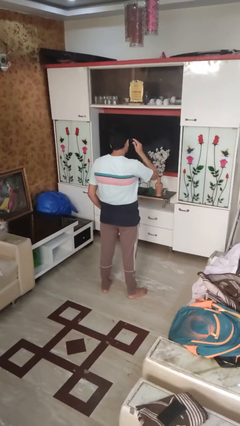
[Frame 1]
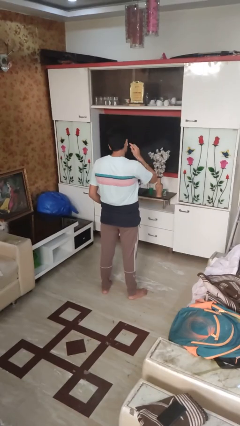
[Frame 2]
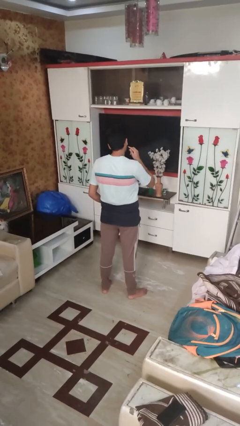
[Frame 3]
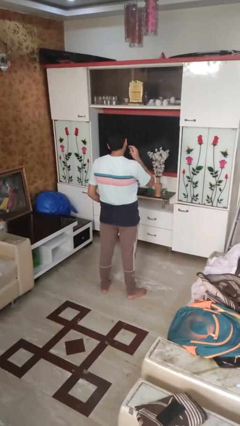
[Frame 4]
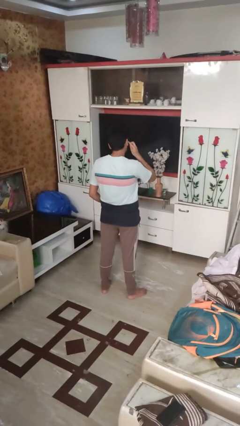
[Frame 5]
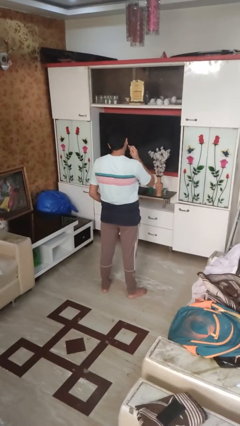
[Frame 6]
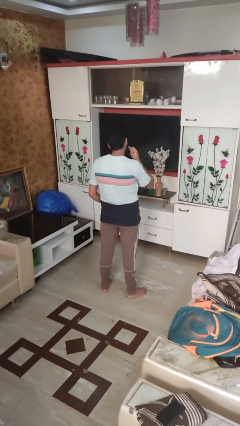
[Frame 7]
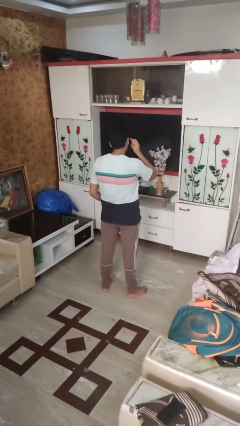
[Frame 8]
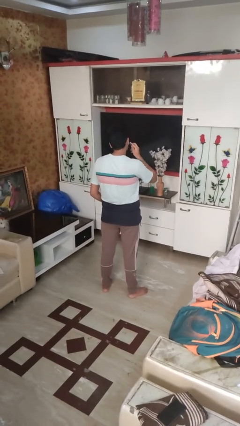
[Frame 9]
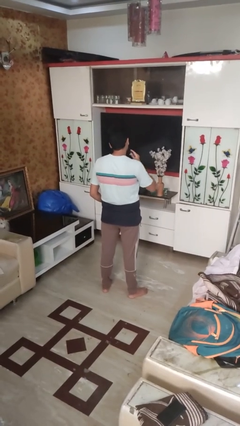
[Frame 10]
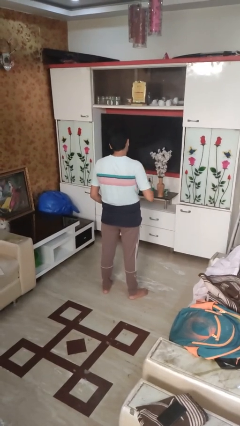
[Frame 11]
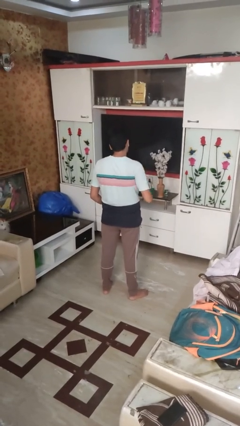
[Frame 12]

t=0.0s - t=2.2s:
person shaves face

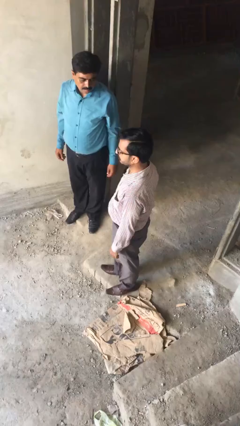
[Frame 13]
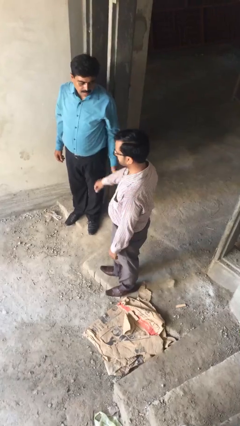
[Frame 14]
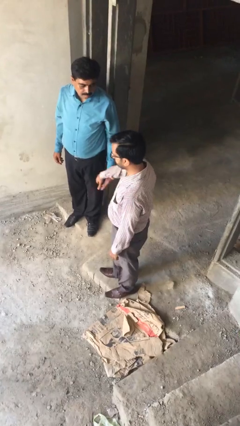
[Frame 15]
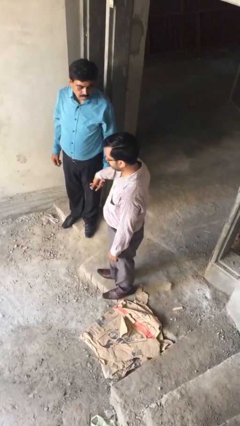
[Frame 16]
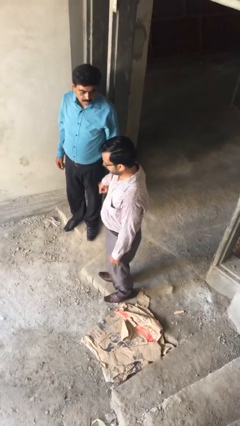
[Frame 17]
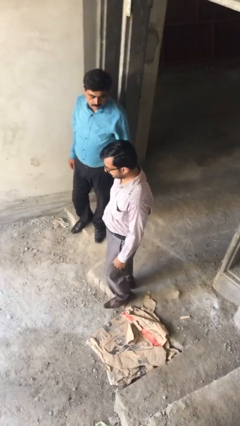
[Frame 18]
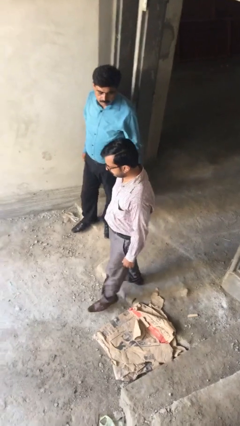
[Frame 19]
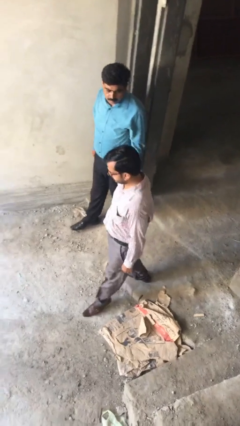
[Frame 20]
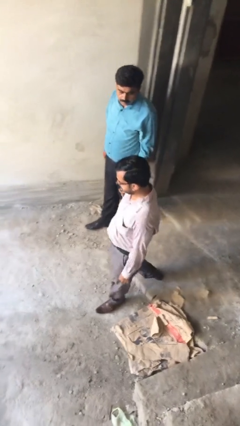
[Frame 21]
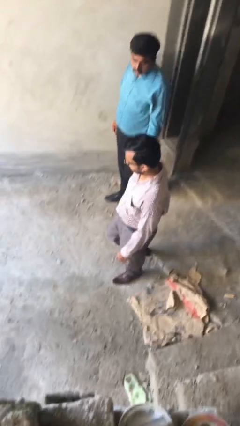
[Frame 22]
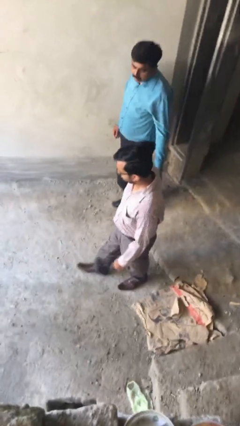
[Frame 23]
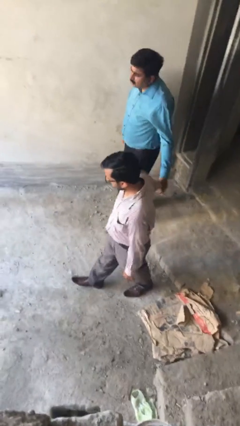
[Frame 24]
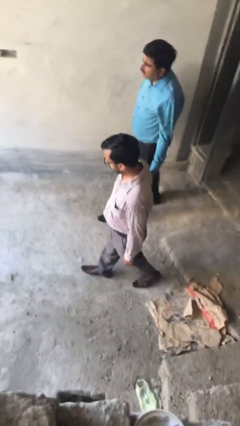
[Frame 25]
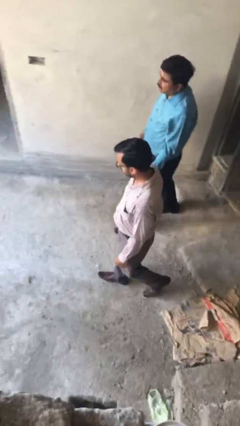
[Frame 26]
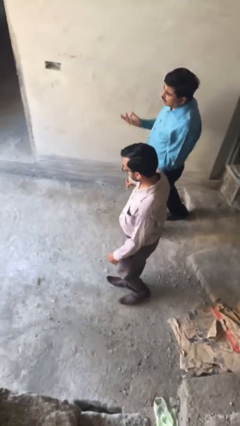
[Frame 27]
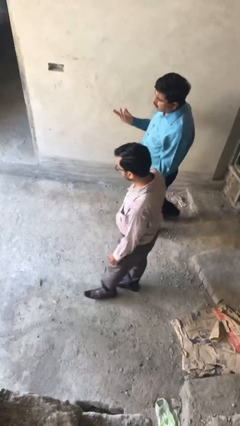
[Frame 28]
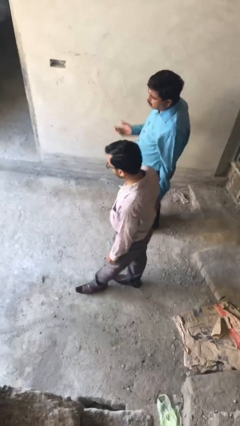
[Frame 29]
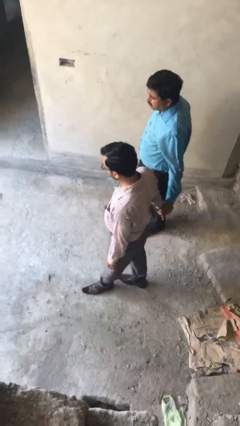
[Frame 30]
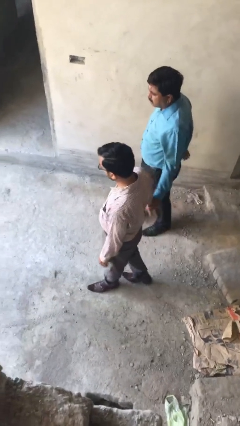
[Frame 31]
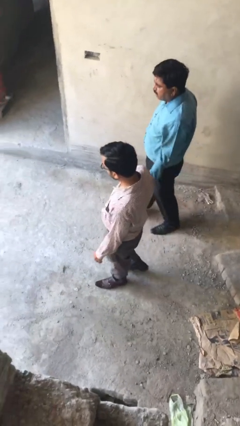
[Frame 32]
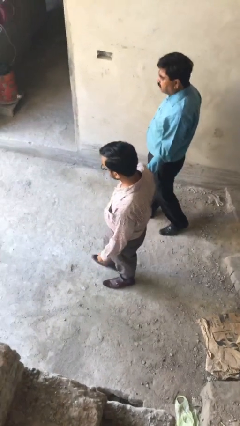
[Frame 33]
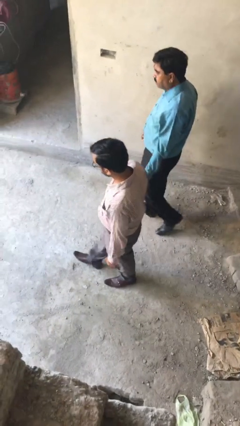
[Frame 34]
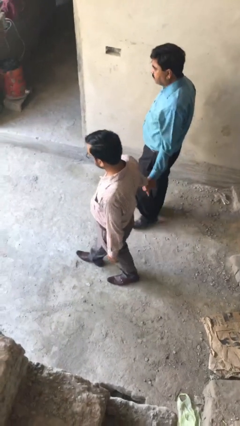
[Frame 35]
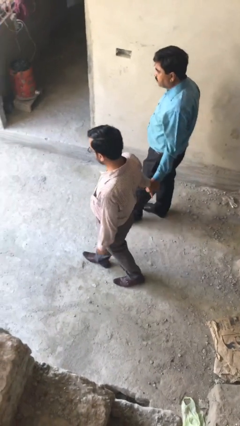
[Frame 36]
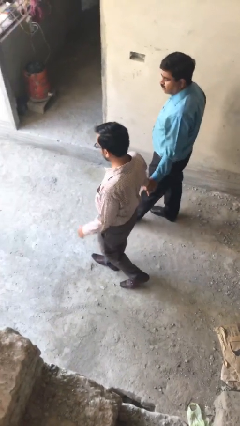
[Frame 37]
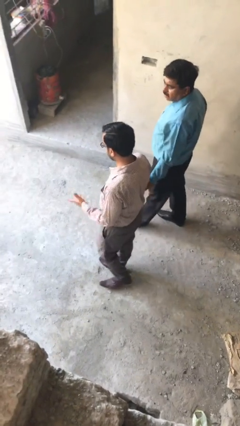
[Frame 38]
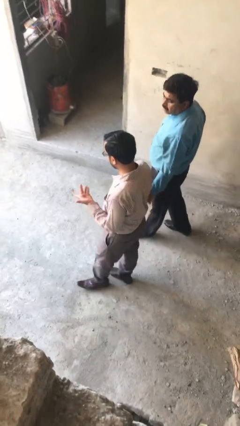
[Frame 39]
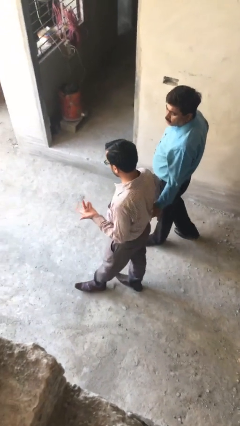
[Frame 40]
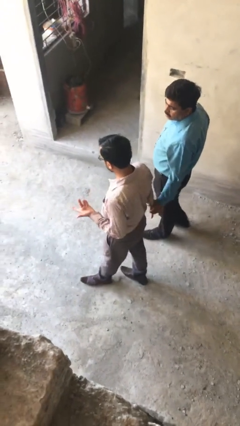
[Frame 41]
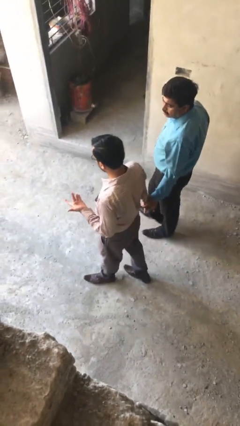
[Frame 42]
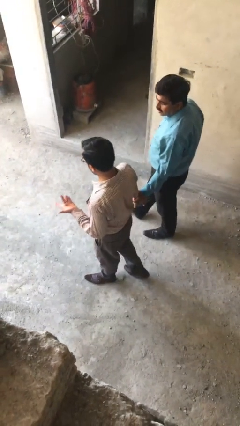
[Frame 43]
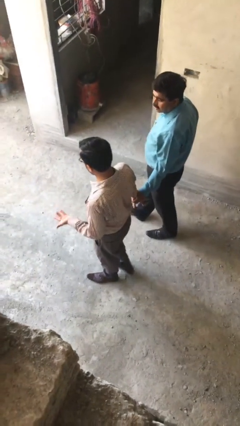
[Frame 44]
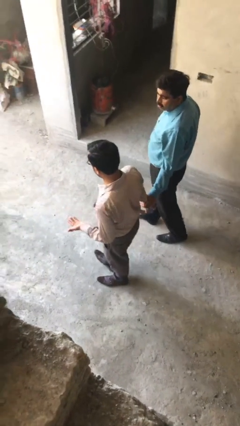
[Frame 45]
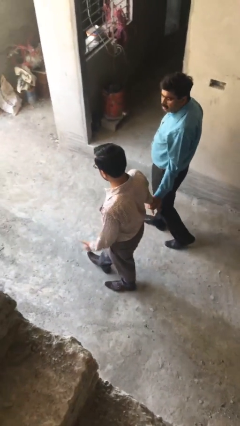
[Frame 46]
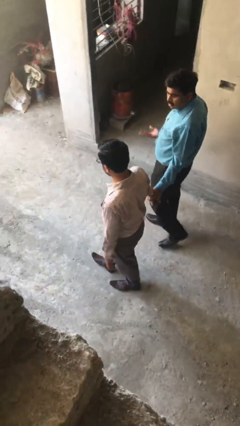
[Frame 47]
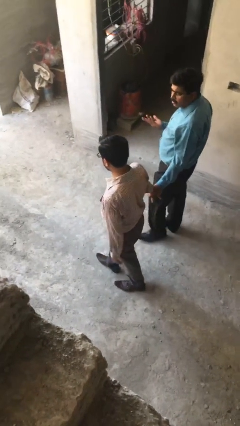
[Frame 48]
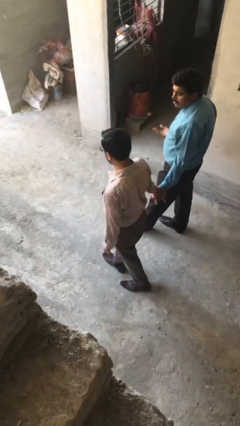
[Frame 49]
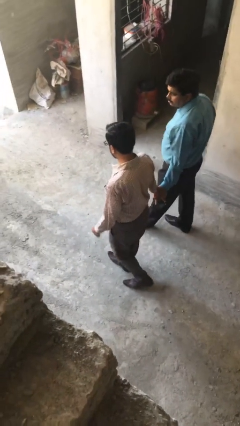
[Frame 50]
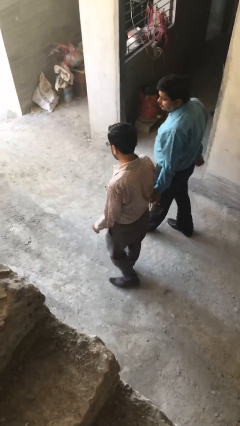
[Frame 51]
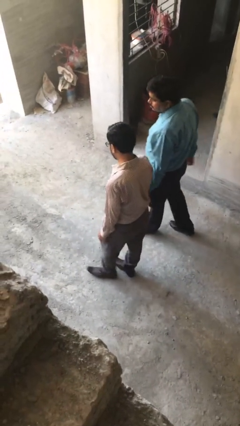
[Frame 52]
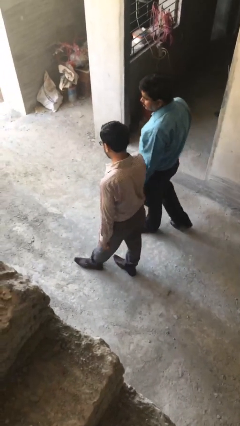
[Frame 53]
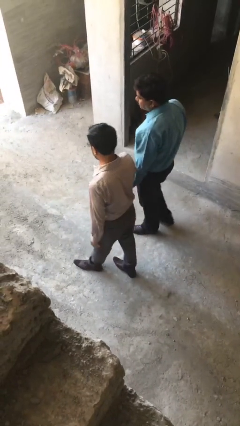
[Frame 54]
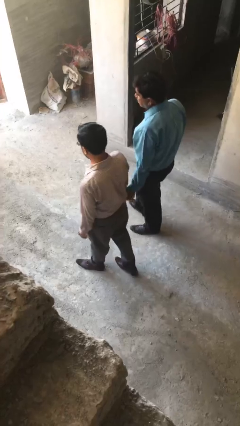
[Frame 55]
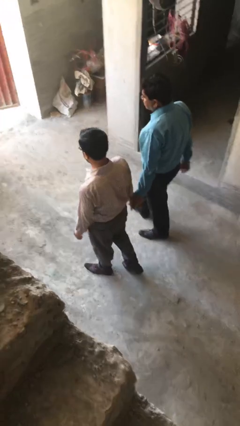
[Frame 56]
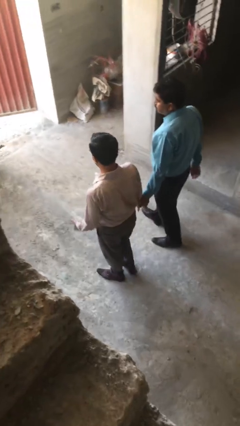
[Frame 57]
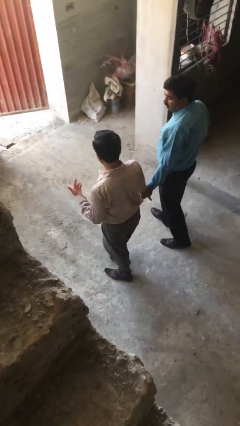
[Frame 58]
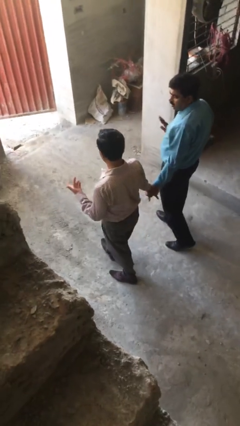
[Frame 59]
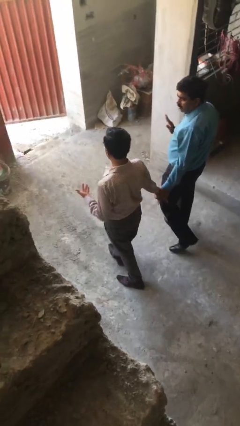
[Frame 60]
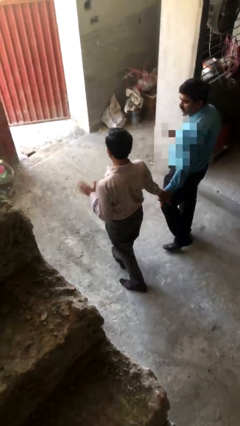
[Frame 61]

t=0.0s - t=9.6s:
person holds hand

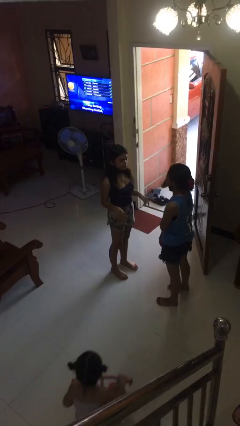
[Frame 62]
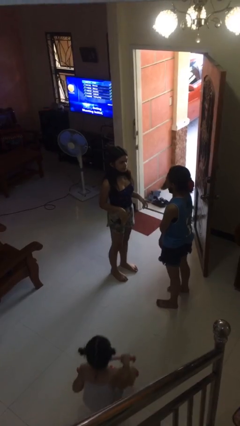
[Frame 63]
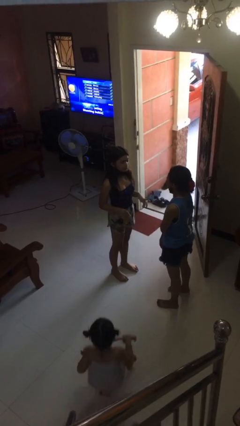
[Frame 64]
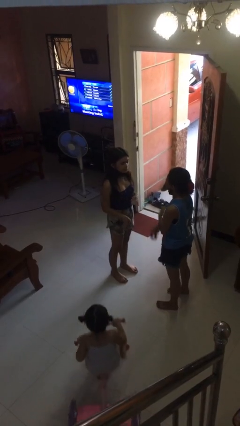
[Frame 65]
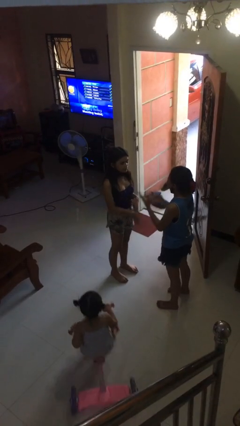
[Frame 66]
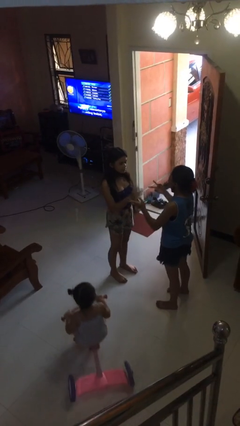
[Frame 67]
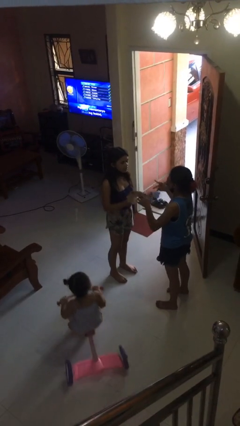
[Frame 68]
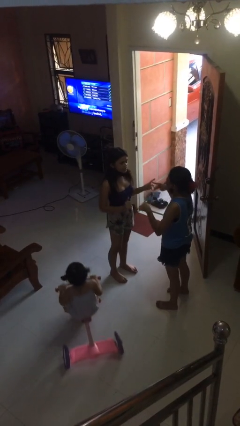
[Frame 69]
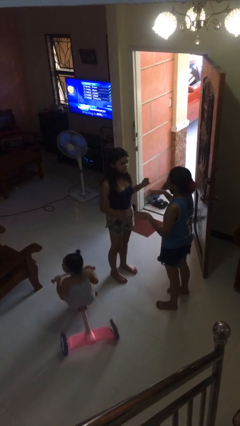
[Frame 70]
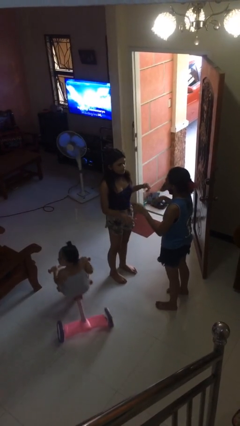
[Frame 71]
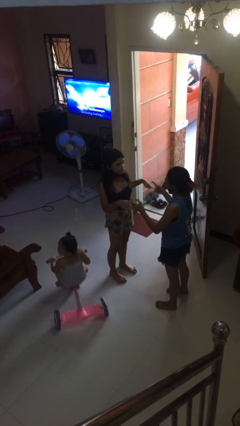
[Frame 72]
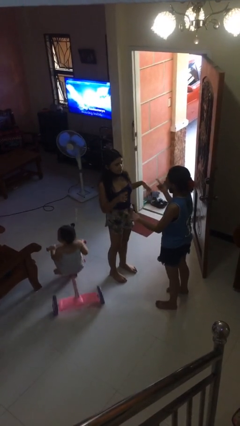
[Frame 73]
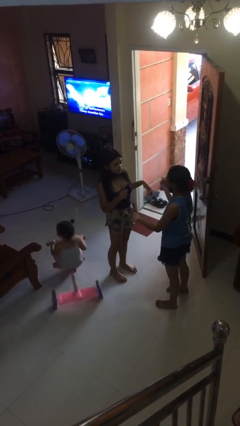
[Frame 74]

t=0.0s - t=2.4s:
person talks to person

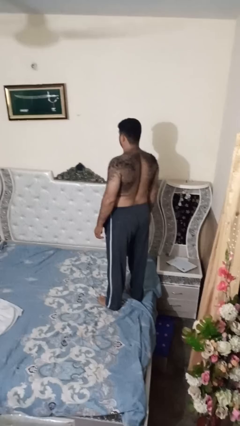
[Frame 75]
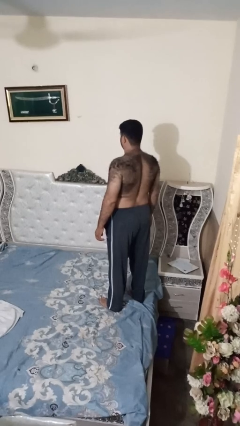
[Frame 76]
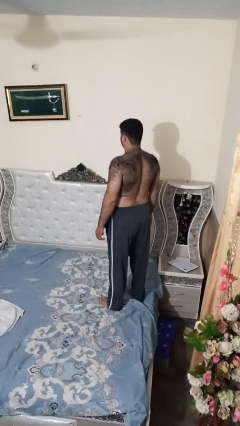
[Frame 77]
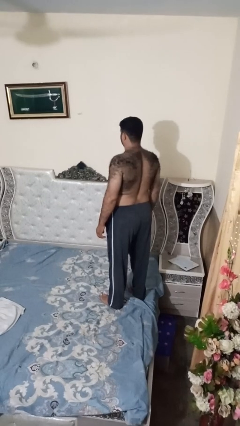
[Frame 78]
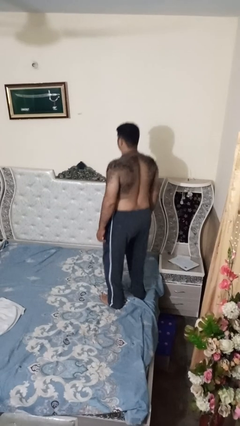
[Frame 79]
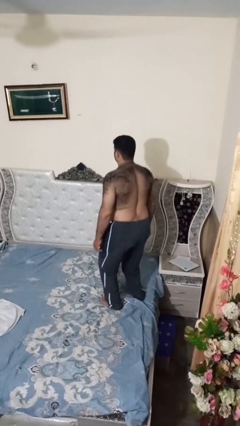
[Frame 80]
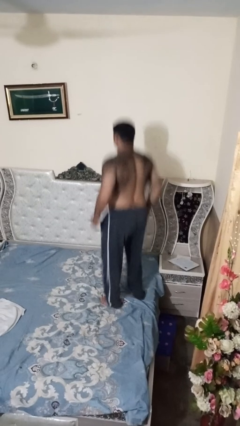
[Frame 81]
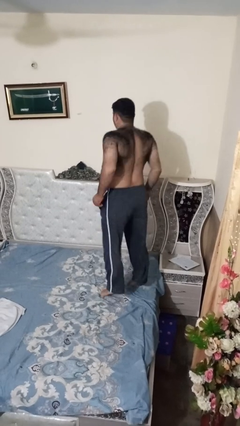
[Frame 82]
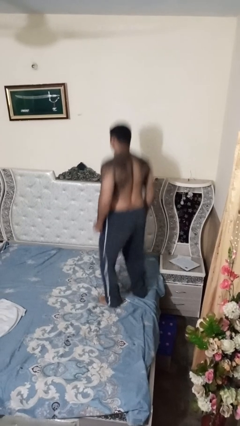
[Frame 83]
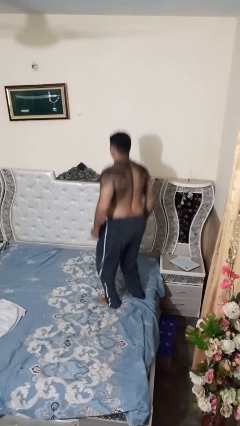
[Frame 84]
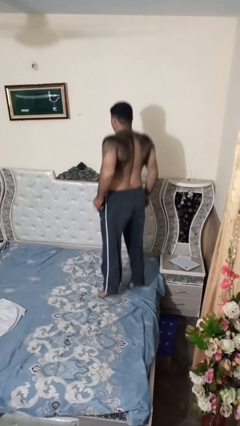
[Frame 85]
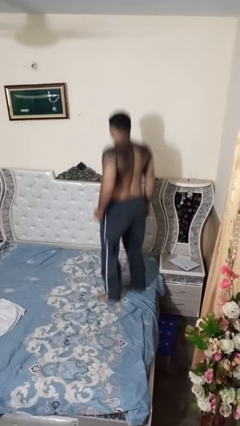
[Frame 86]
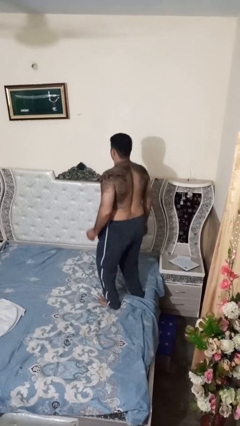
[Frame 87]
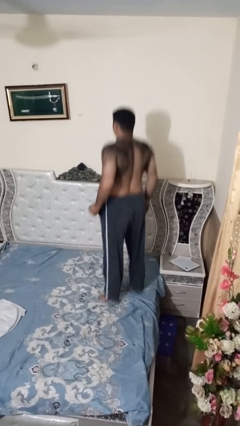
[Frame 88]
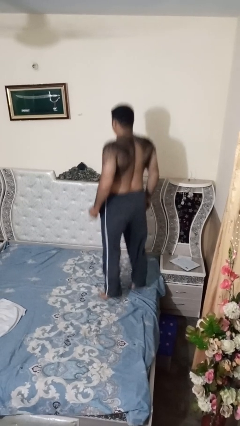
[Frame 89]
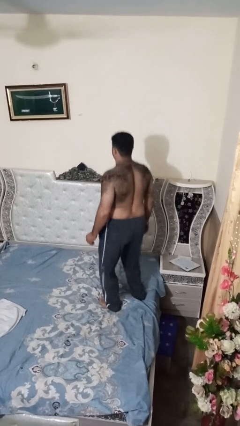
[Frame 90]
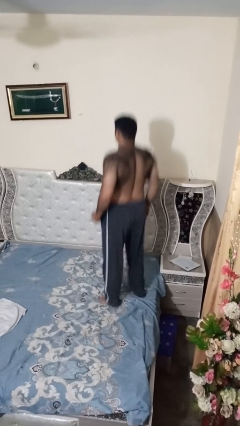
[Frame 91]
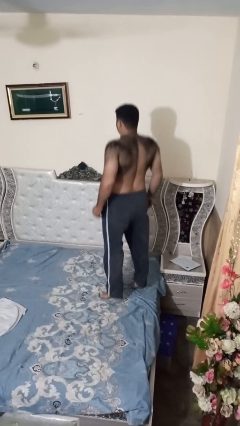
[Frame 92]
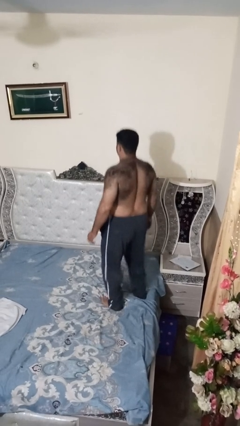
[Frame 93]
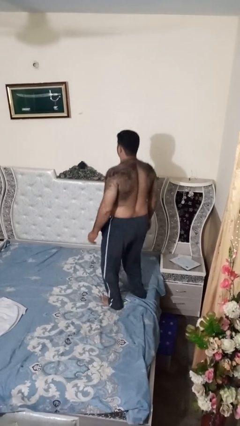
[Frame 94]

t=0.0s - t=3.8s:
person jumps on bed
